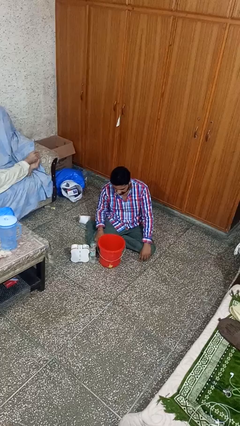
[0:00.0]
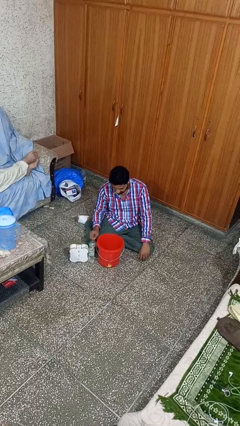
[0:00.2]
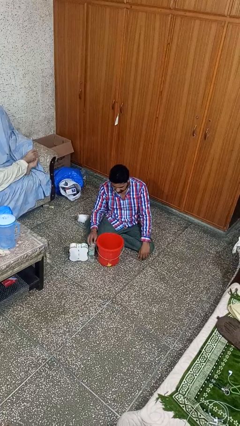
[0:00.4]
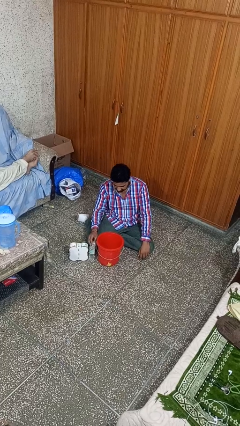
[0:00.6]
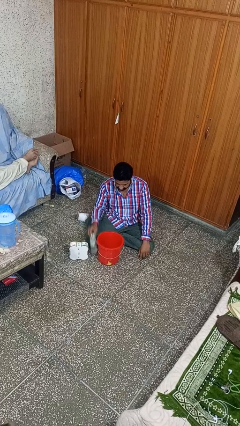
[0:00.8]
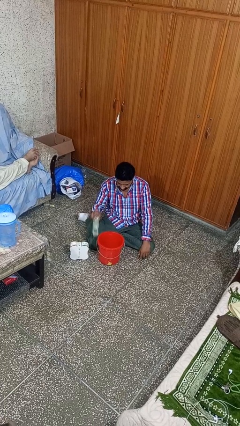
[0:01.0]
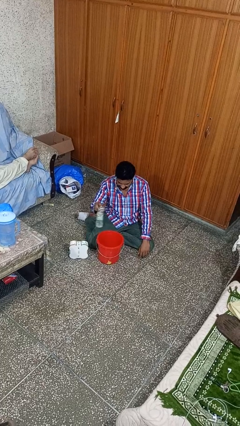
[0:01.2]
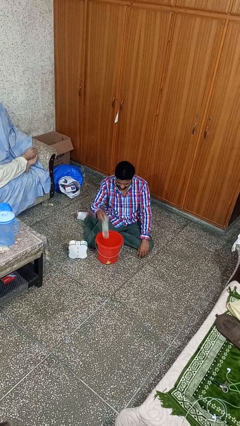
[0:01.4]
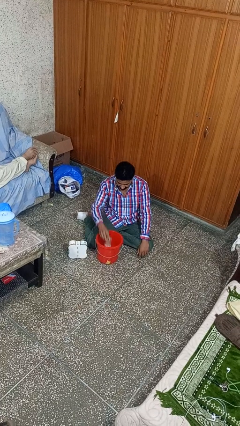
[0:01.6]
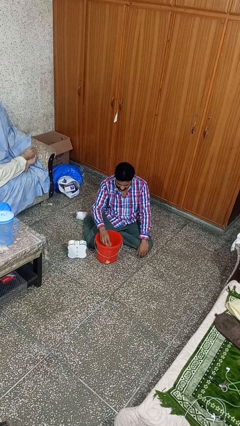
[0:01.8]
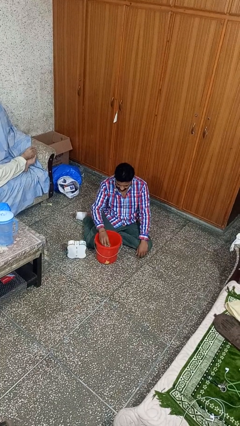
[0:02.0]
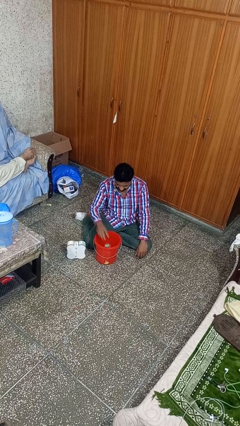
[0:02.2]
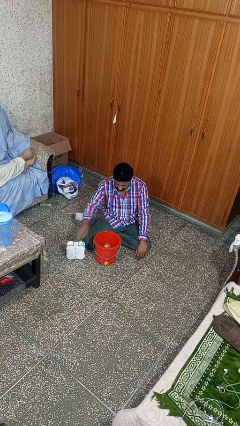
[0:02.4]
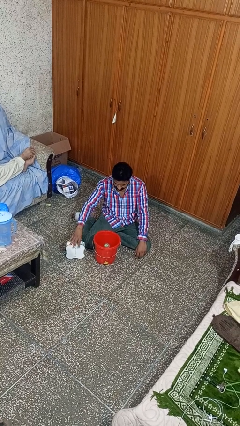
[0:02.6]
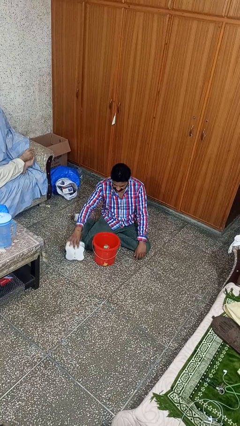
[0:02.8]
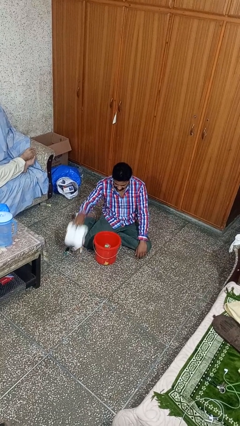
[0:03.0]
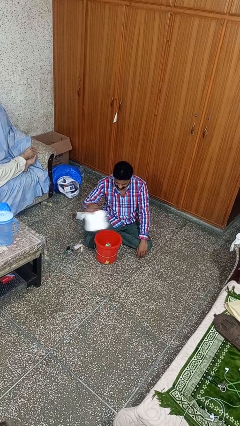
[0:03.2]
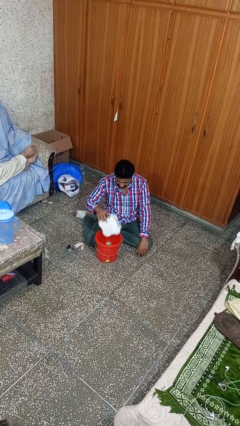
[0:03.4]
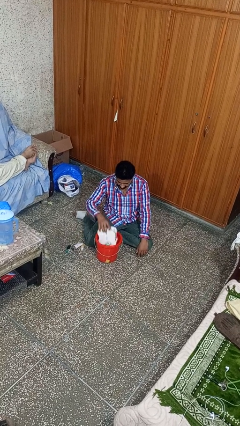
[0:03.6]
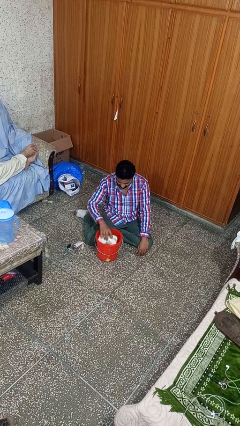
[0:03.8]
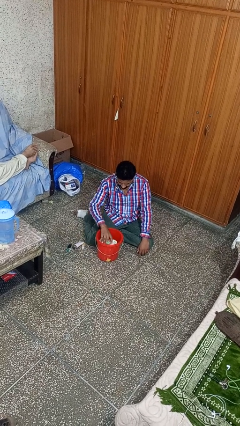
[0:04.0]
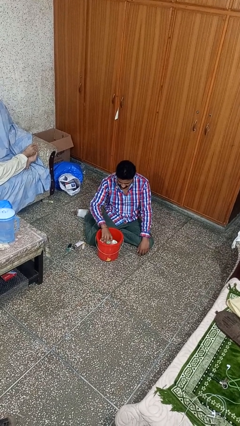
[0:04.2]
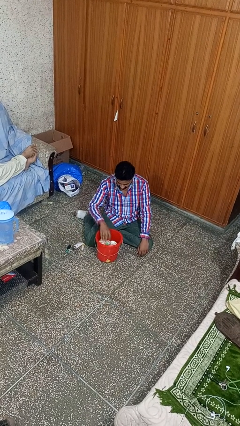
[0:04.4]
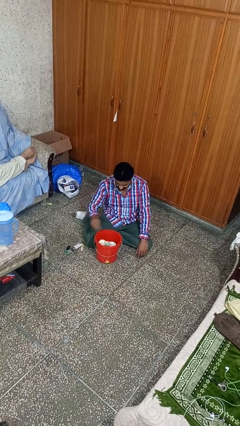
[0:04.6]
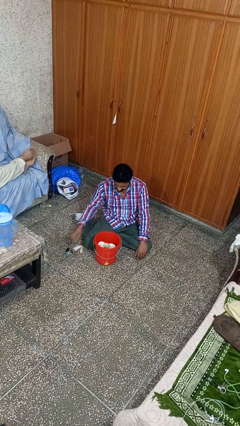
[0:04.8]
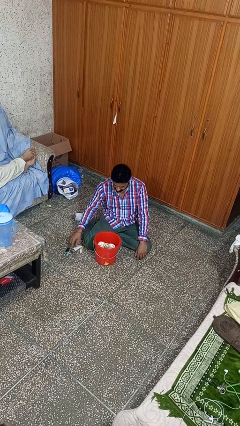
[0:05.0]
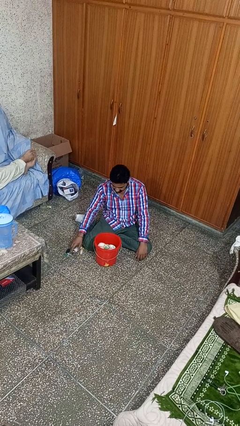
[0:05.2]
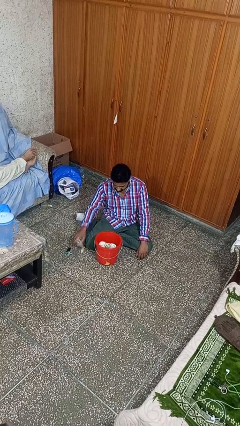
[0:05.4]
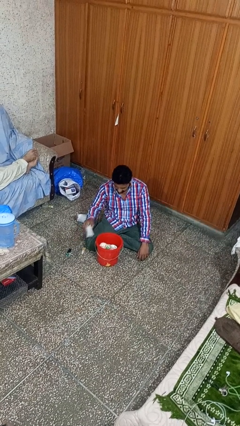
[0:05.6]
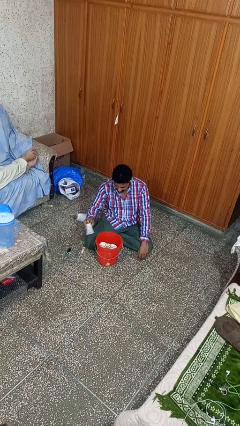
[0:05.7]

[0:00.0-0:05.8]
person puts object into basket

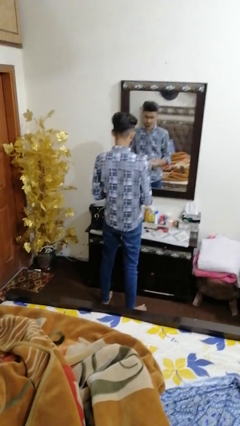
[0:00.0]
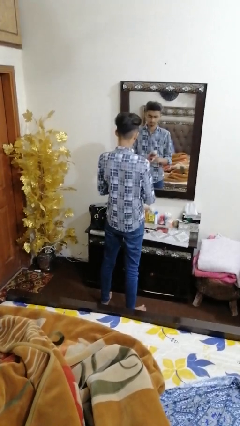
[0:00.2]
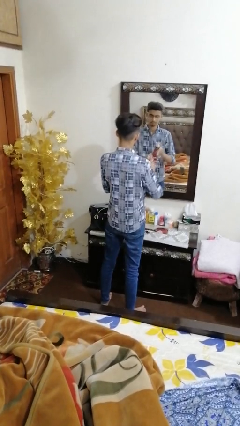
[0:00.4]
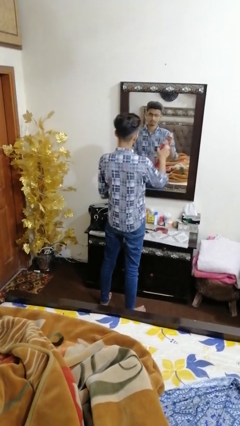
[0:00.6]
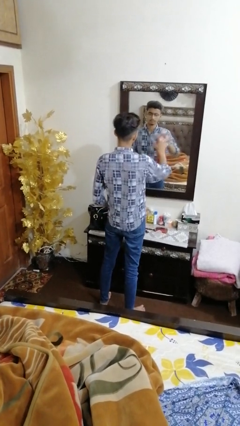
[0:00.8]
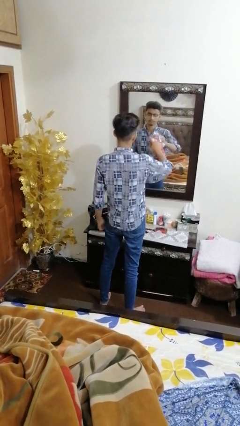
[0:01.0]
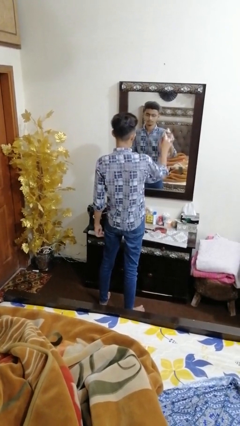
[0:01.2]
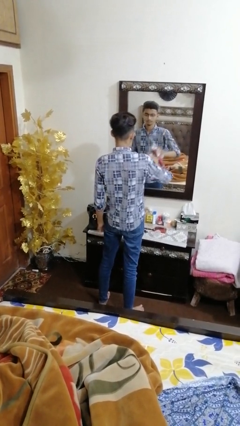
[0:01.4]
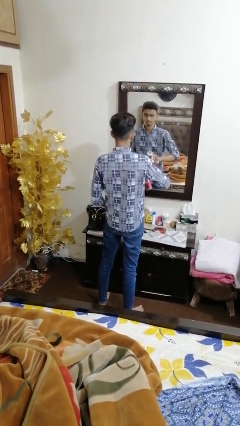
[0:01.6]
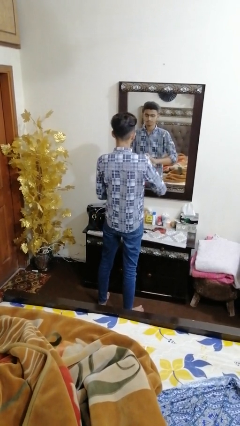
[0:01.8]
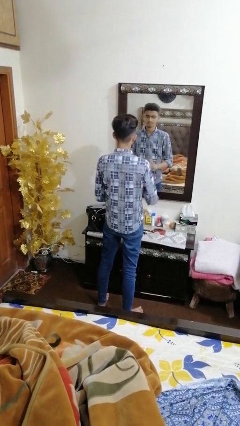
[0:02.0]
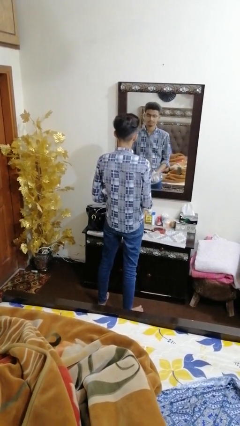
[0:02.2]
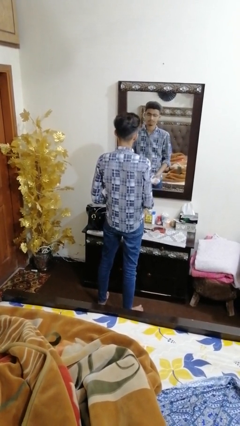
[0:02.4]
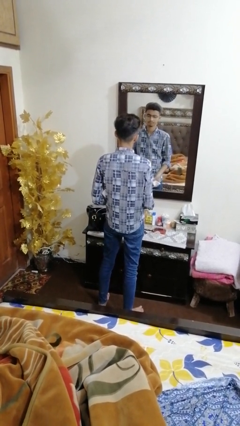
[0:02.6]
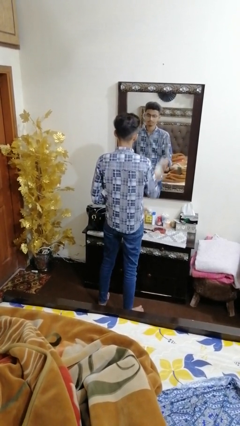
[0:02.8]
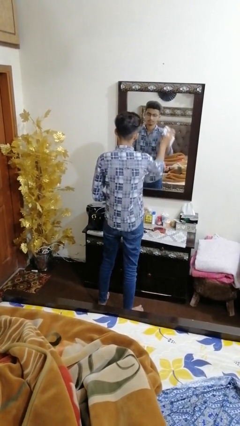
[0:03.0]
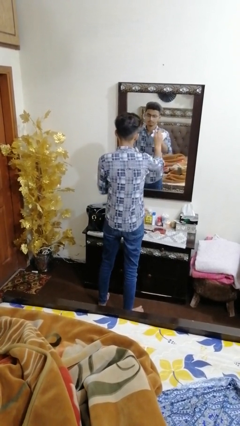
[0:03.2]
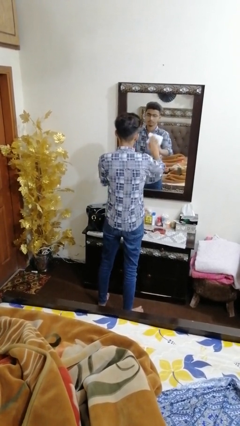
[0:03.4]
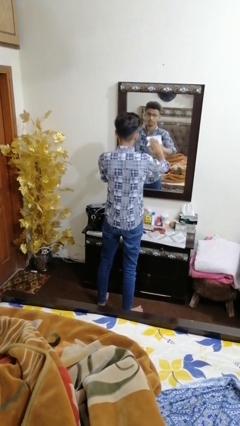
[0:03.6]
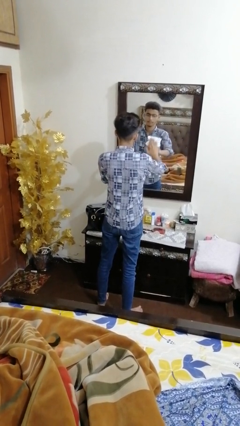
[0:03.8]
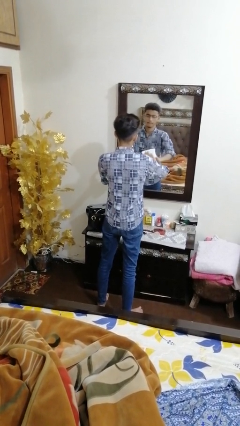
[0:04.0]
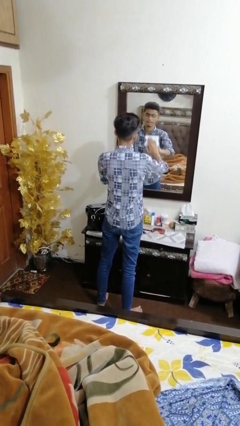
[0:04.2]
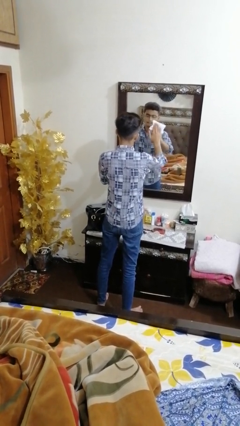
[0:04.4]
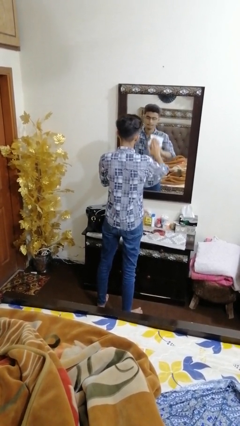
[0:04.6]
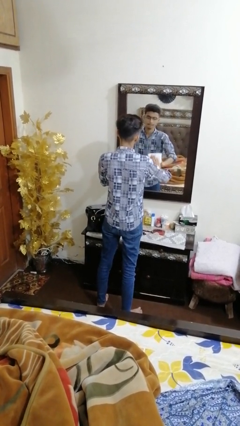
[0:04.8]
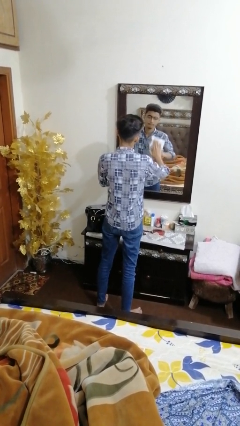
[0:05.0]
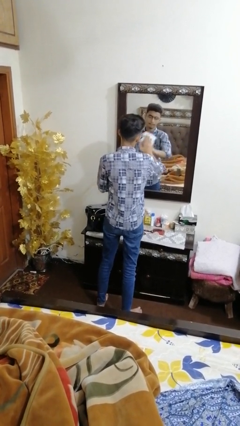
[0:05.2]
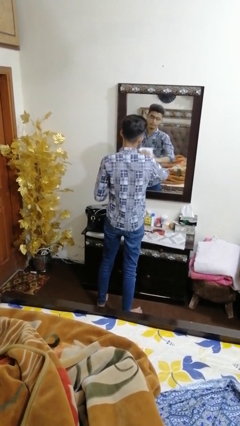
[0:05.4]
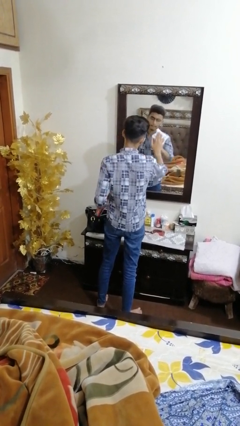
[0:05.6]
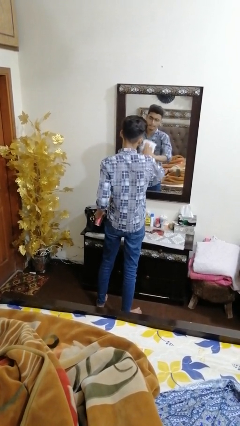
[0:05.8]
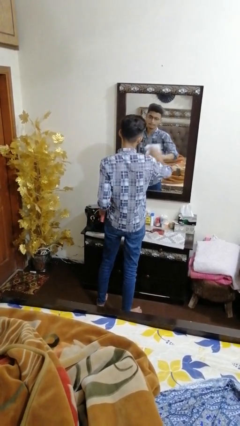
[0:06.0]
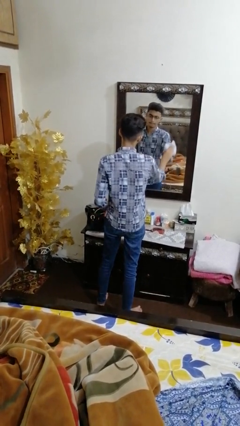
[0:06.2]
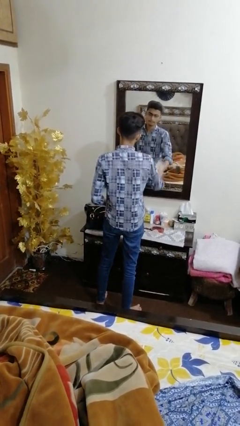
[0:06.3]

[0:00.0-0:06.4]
person sprays from bottle

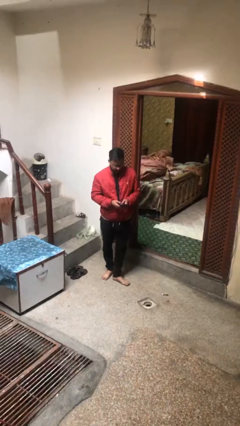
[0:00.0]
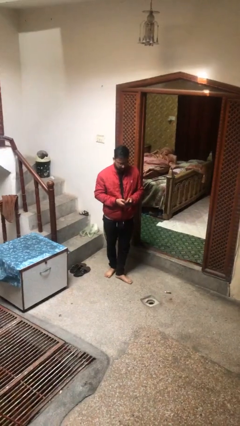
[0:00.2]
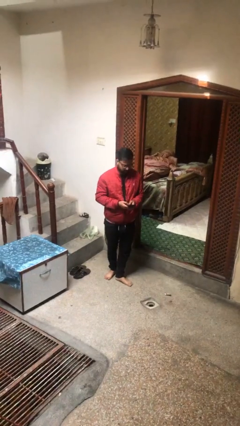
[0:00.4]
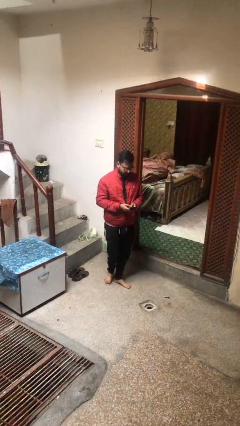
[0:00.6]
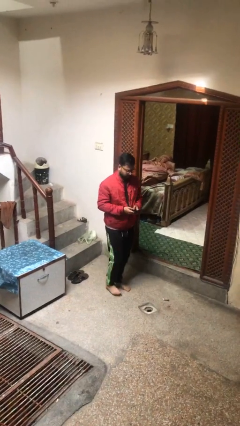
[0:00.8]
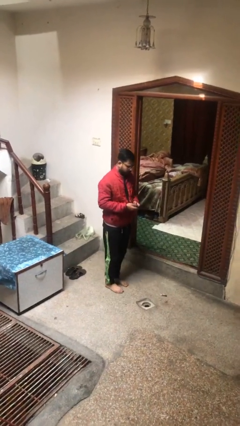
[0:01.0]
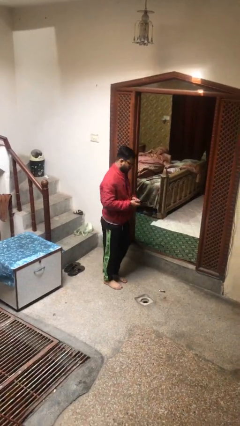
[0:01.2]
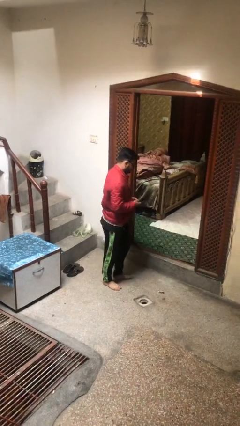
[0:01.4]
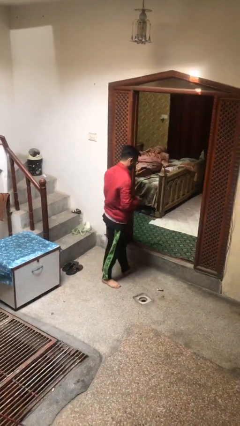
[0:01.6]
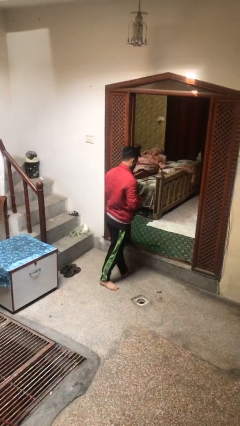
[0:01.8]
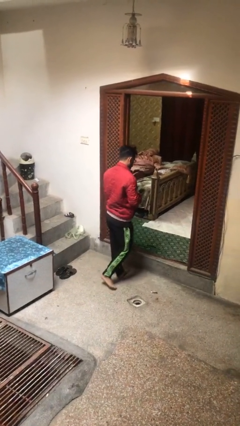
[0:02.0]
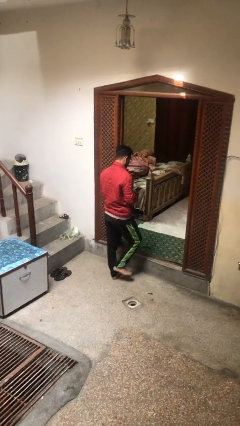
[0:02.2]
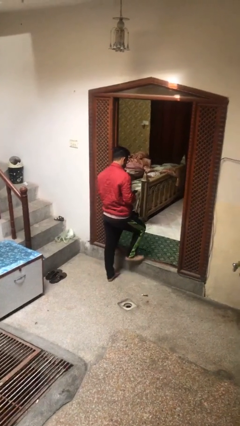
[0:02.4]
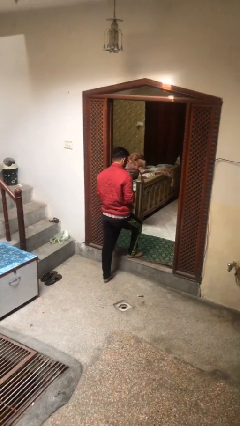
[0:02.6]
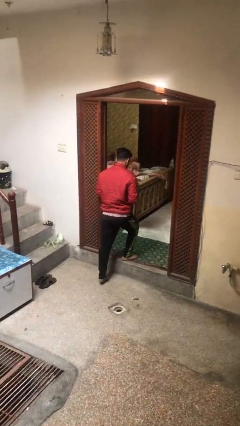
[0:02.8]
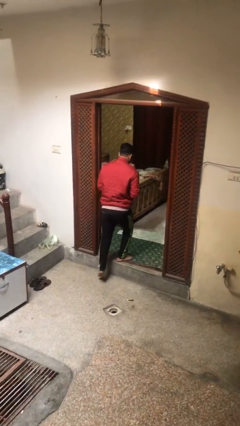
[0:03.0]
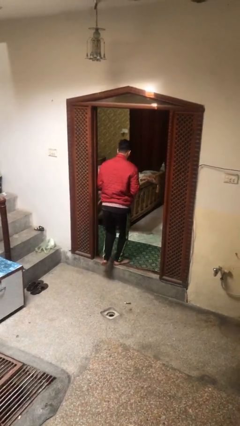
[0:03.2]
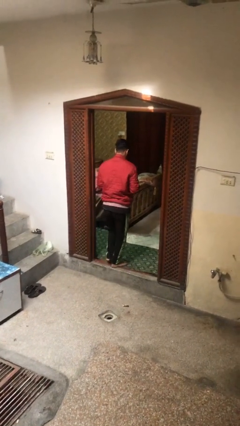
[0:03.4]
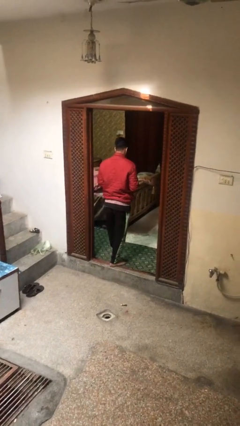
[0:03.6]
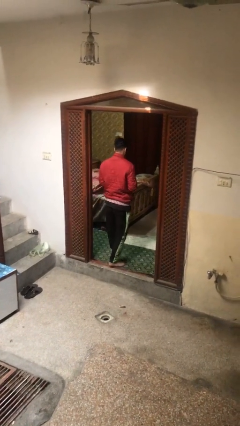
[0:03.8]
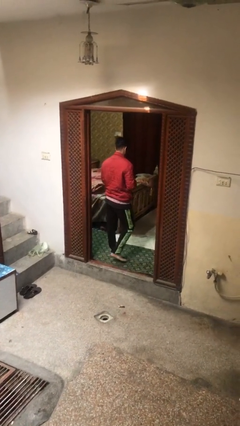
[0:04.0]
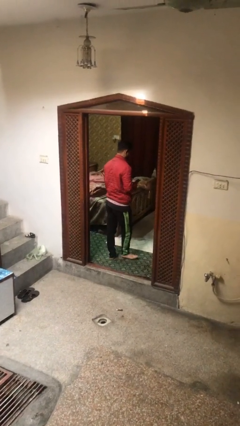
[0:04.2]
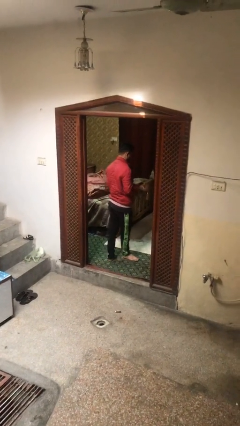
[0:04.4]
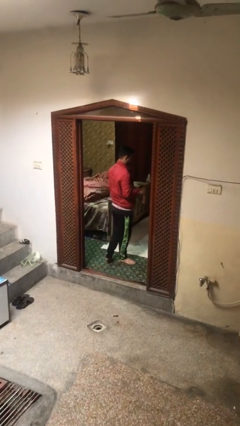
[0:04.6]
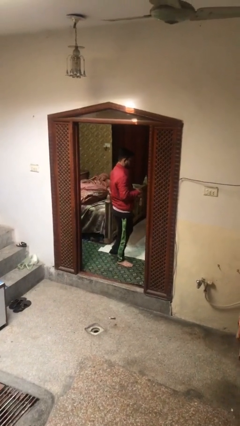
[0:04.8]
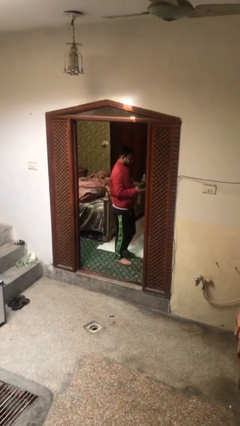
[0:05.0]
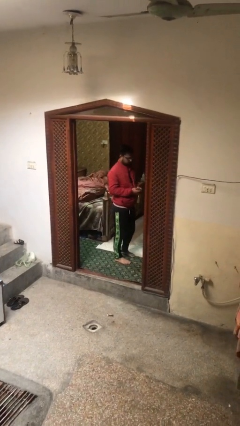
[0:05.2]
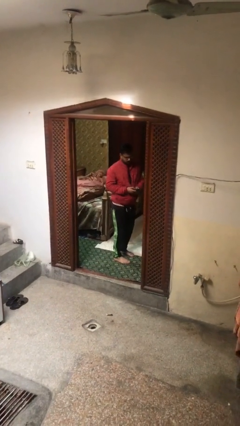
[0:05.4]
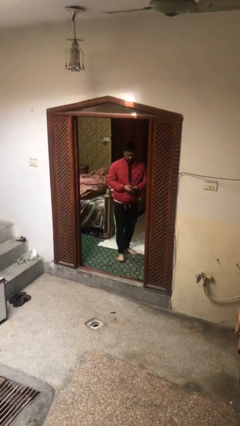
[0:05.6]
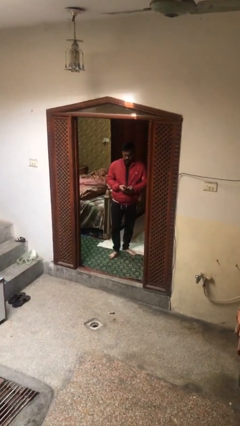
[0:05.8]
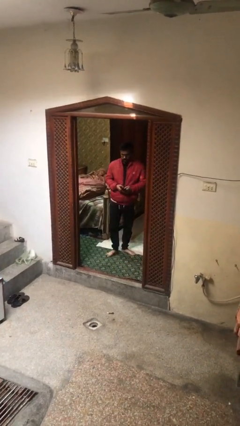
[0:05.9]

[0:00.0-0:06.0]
person exits scene through structure
